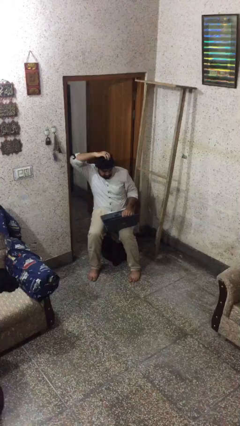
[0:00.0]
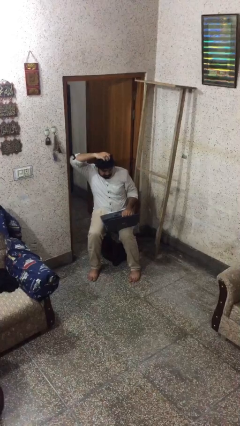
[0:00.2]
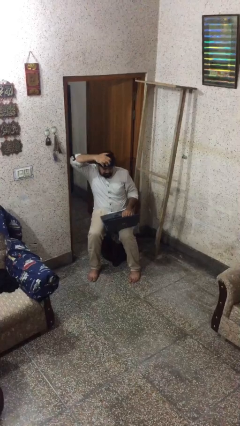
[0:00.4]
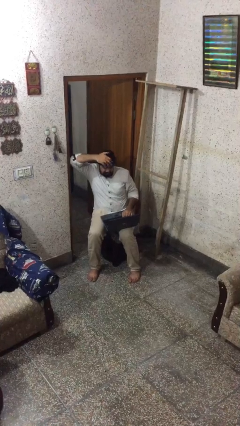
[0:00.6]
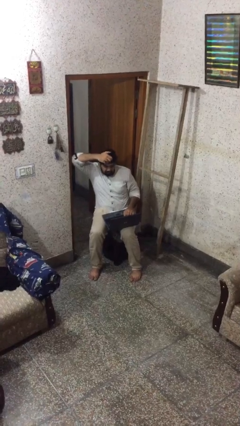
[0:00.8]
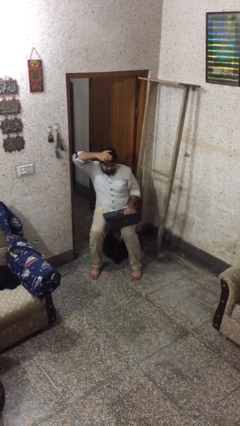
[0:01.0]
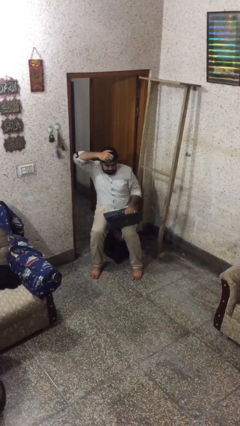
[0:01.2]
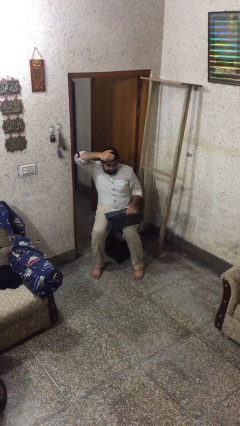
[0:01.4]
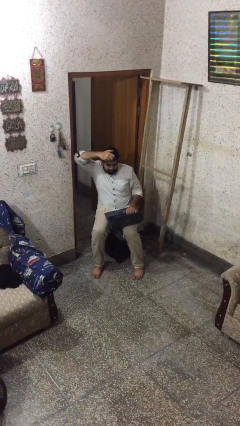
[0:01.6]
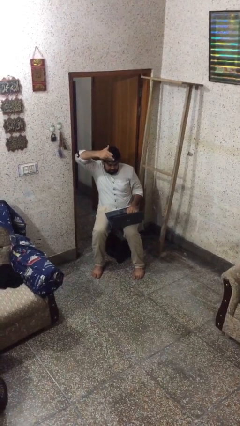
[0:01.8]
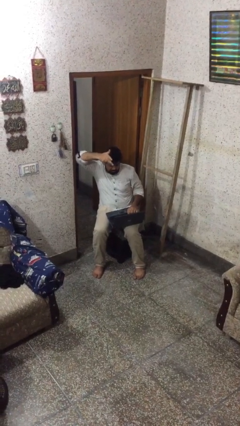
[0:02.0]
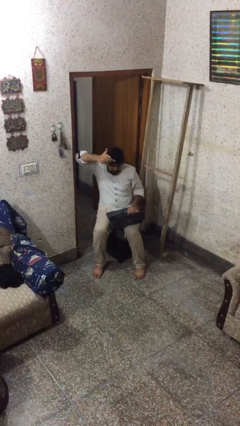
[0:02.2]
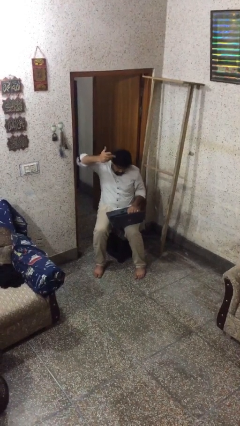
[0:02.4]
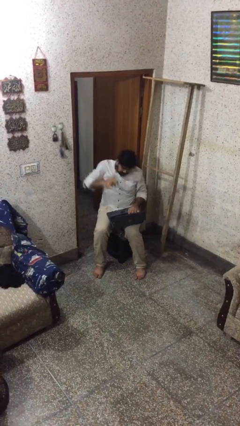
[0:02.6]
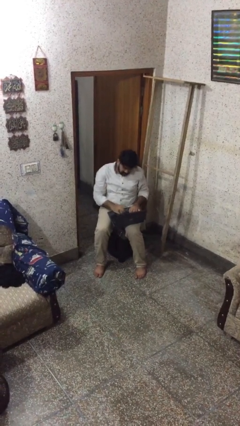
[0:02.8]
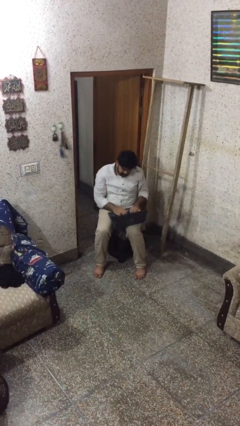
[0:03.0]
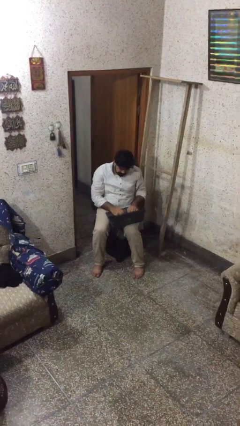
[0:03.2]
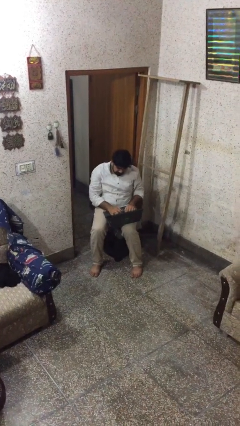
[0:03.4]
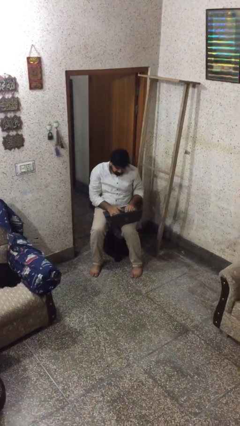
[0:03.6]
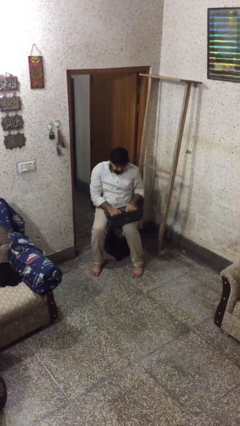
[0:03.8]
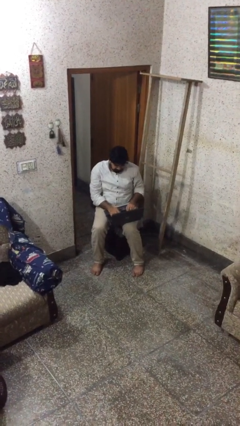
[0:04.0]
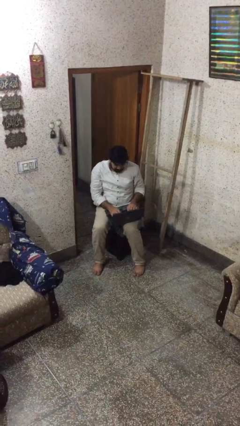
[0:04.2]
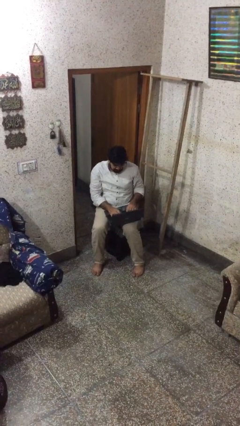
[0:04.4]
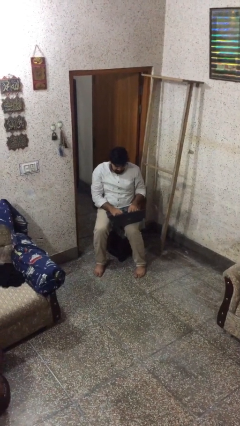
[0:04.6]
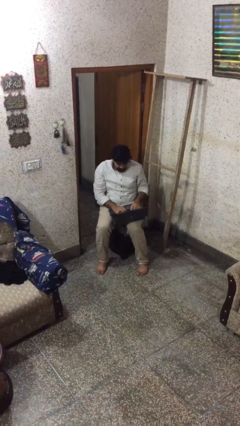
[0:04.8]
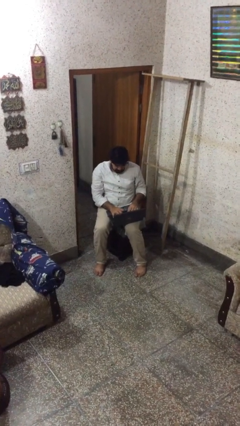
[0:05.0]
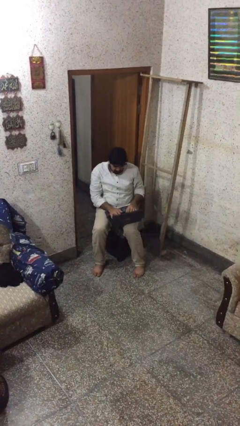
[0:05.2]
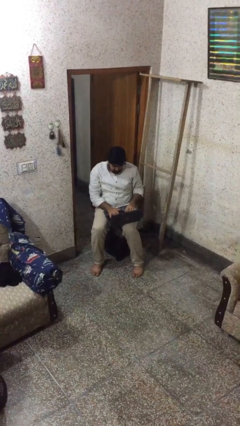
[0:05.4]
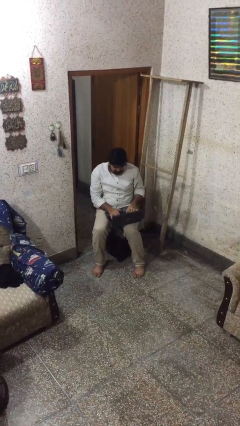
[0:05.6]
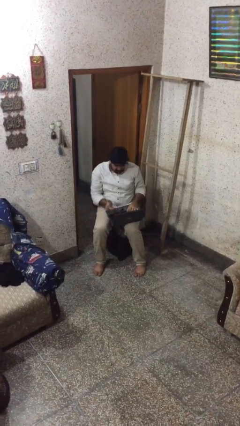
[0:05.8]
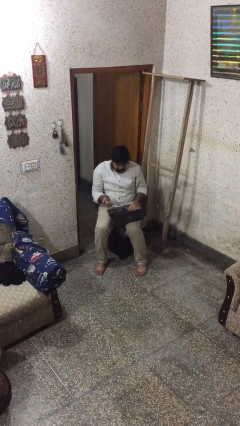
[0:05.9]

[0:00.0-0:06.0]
person interacts with laptop

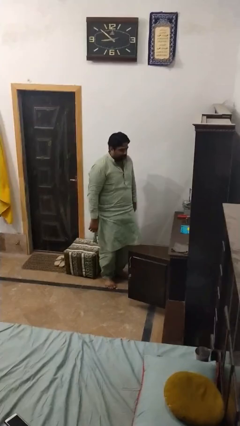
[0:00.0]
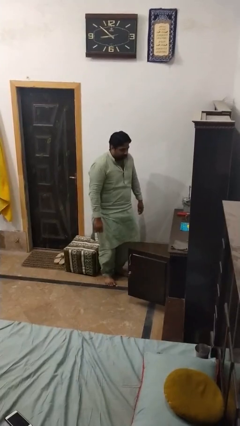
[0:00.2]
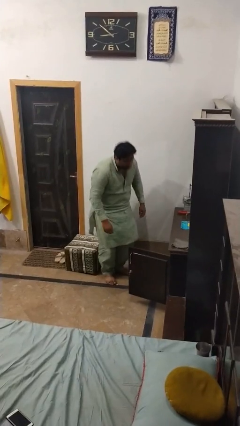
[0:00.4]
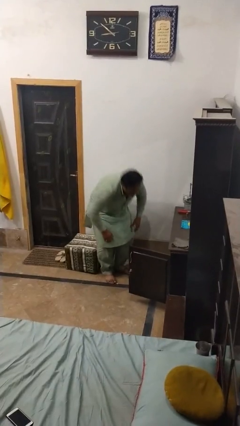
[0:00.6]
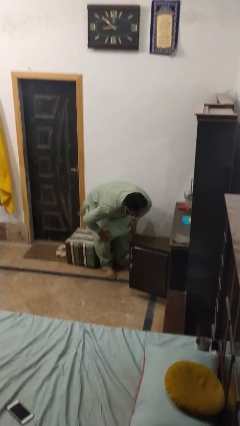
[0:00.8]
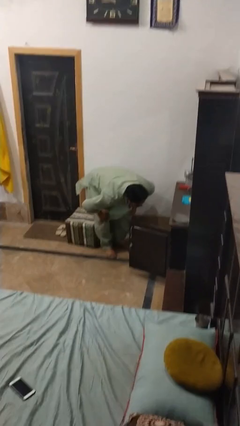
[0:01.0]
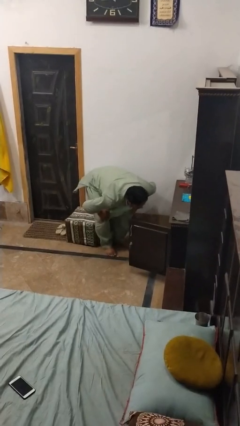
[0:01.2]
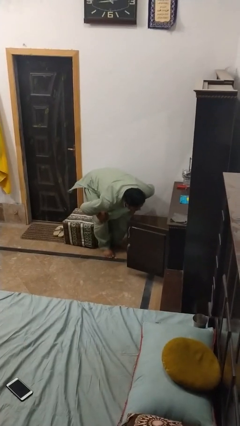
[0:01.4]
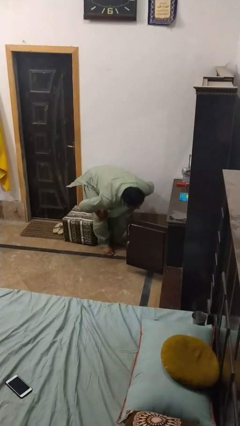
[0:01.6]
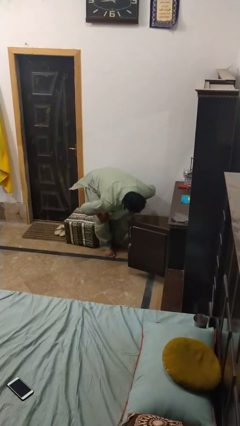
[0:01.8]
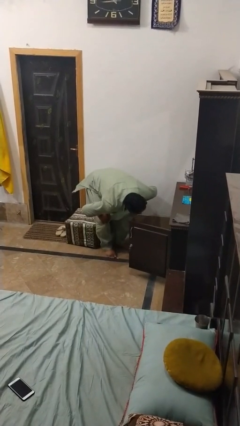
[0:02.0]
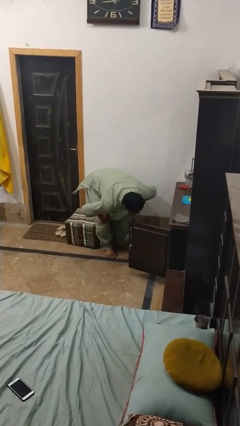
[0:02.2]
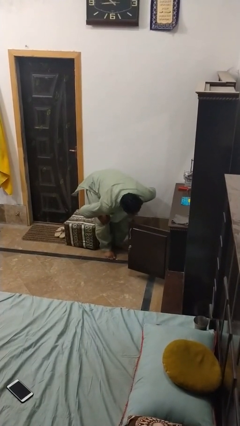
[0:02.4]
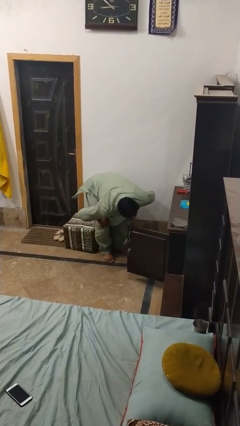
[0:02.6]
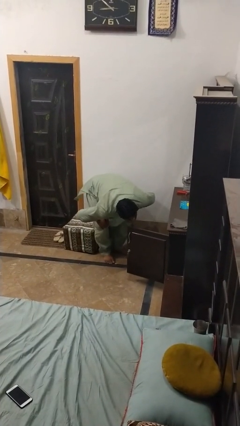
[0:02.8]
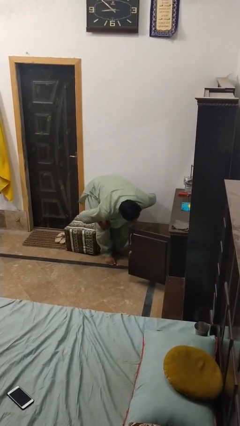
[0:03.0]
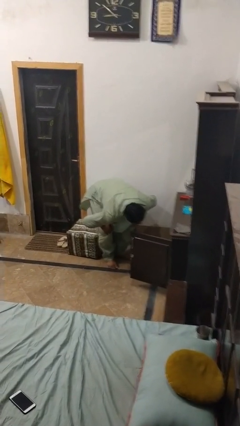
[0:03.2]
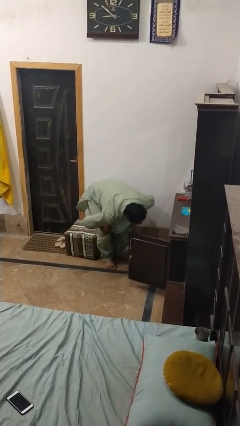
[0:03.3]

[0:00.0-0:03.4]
person searches in cabinet

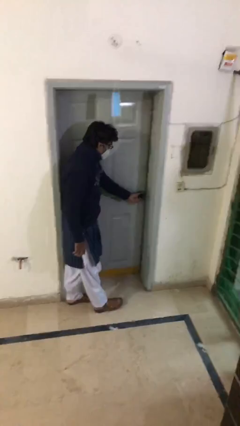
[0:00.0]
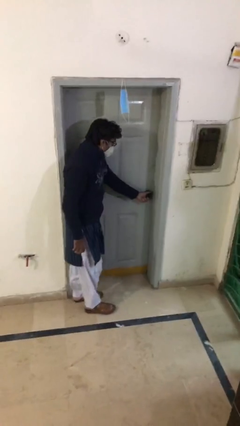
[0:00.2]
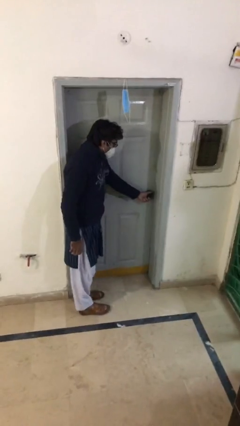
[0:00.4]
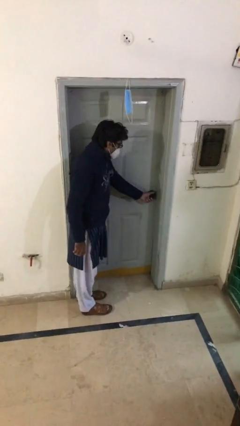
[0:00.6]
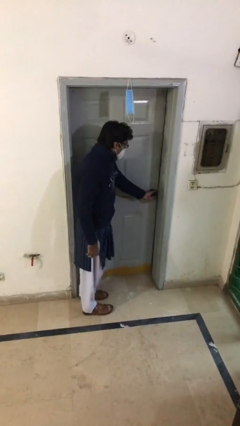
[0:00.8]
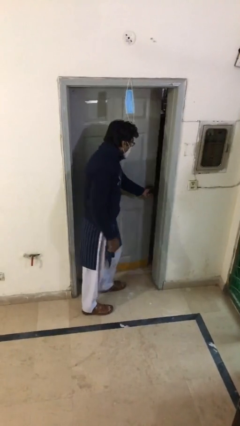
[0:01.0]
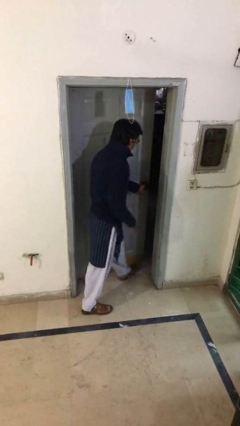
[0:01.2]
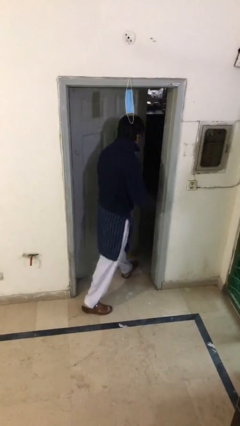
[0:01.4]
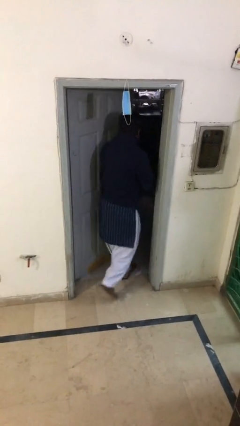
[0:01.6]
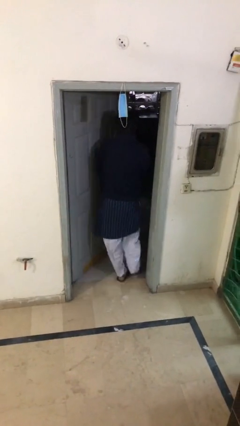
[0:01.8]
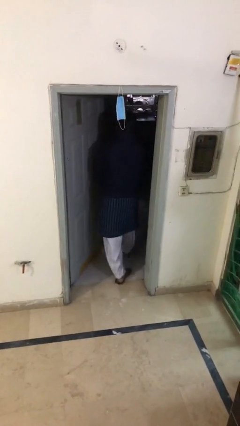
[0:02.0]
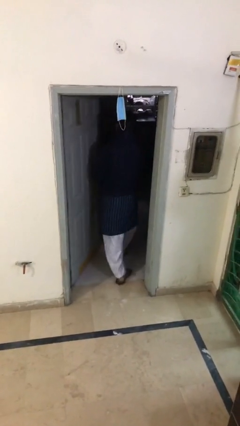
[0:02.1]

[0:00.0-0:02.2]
person opens facility door

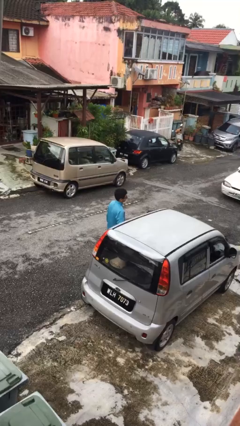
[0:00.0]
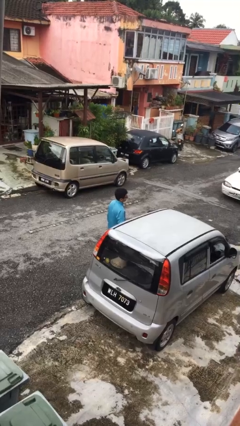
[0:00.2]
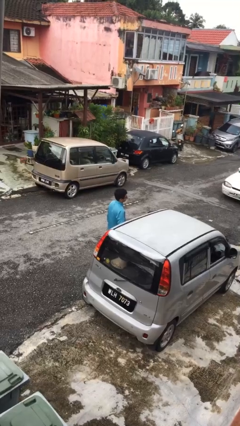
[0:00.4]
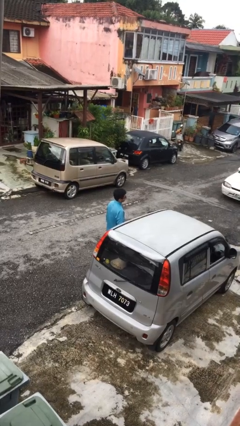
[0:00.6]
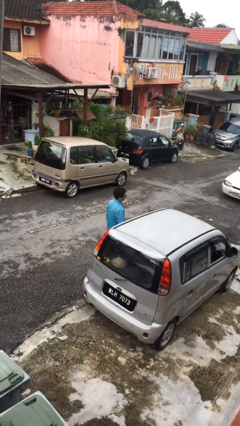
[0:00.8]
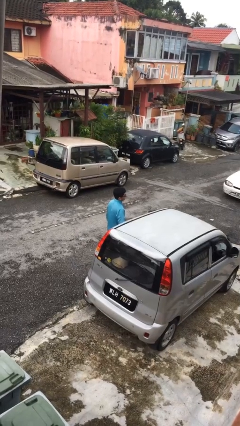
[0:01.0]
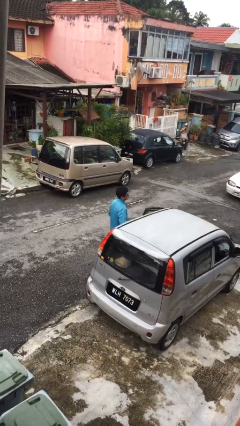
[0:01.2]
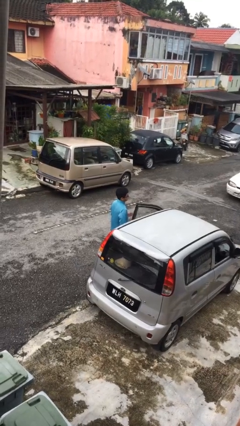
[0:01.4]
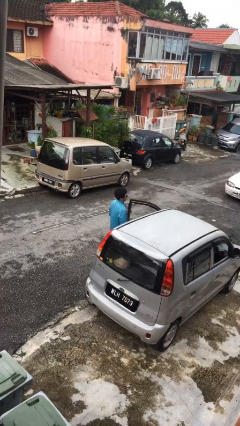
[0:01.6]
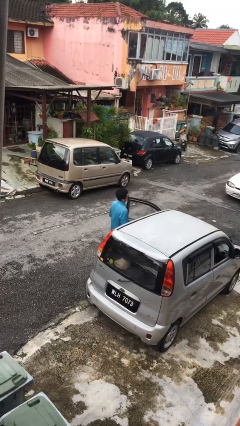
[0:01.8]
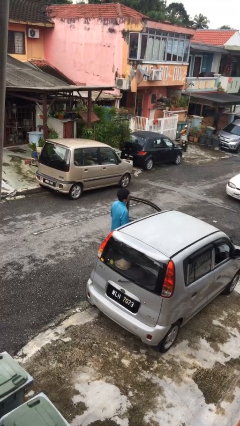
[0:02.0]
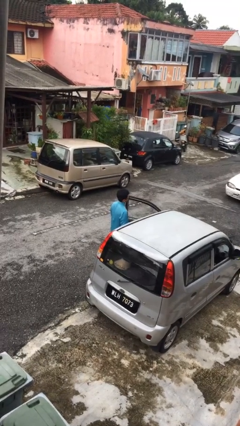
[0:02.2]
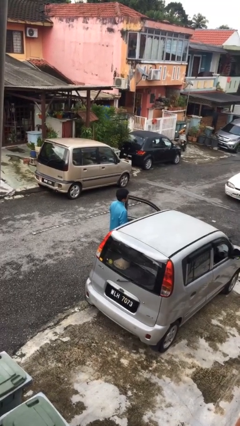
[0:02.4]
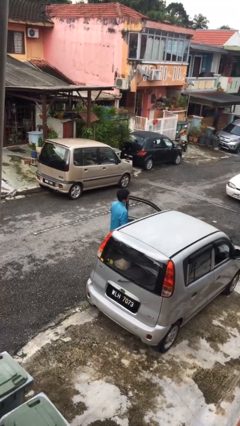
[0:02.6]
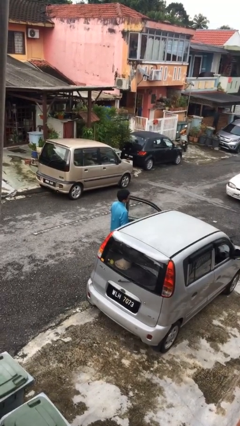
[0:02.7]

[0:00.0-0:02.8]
person opens car door

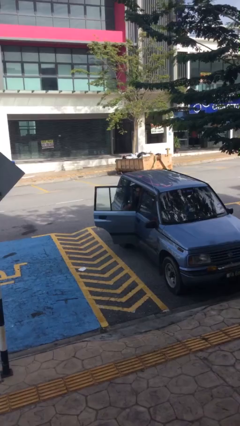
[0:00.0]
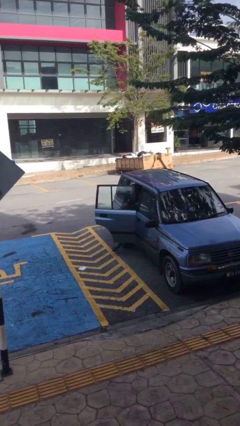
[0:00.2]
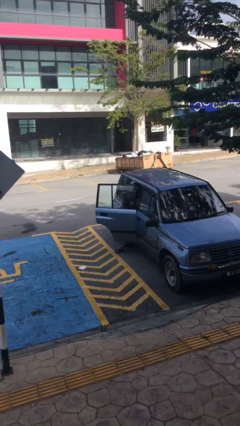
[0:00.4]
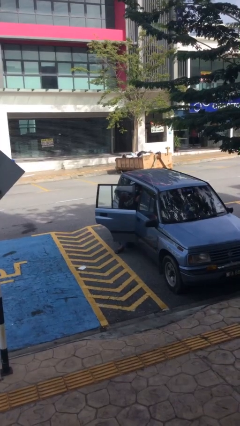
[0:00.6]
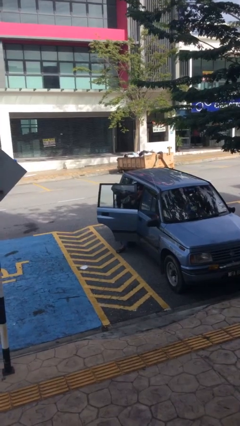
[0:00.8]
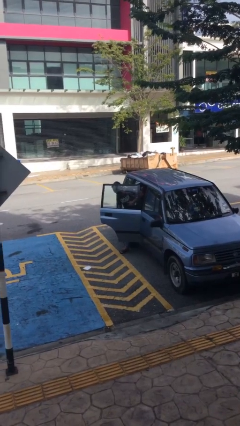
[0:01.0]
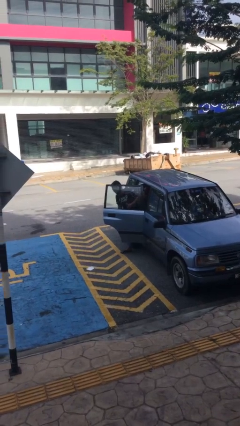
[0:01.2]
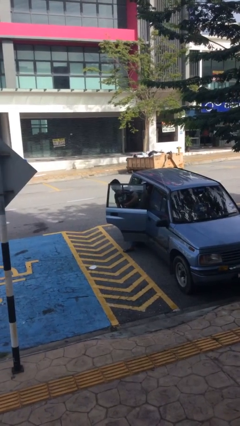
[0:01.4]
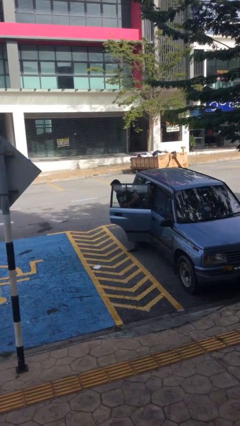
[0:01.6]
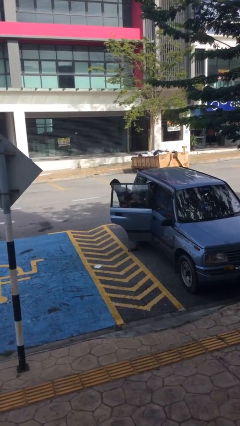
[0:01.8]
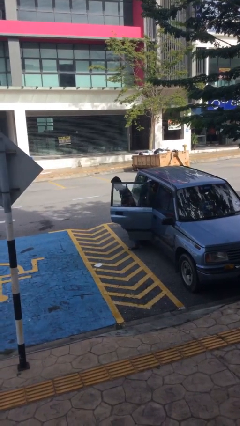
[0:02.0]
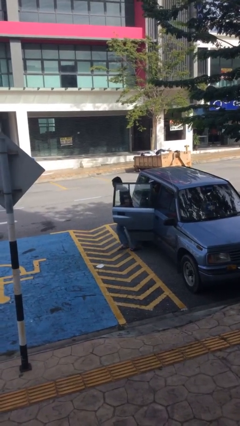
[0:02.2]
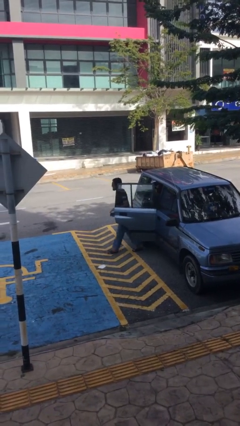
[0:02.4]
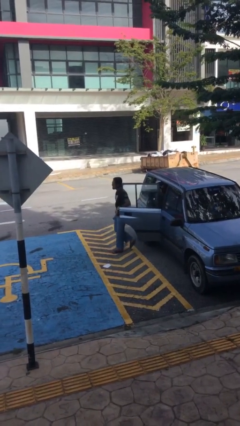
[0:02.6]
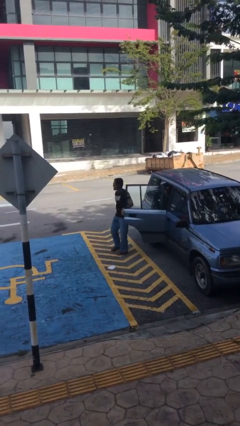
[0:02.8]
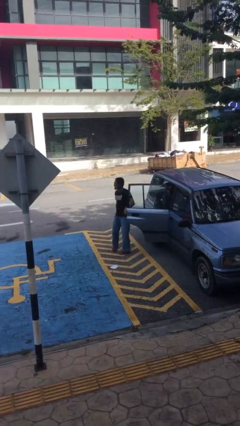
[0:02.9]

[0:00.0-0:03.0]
person exits car
